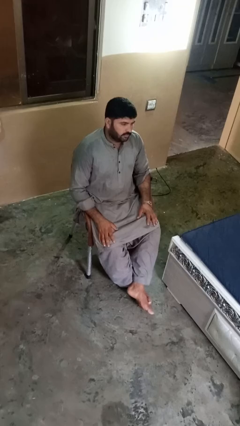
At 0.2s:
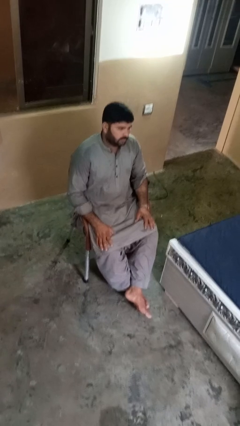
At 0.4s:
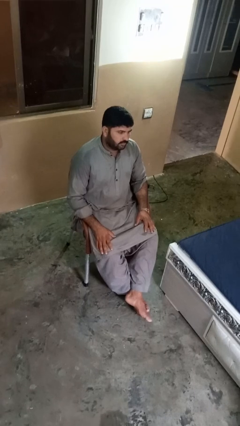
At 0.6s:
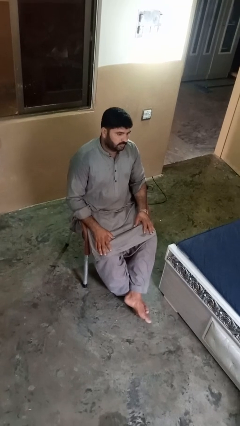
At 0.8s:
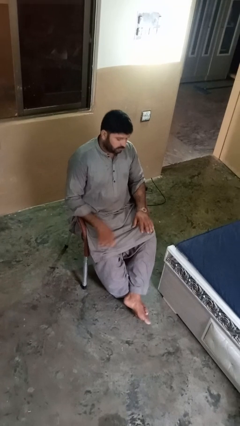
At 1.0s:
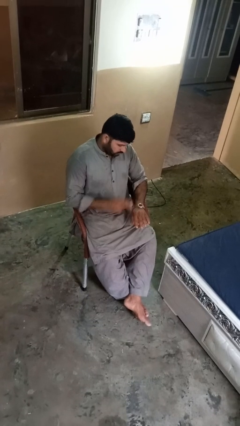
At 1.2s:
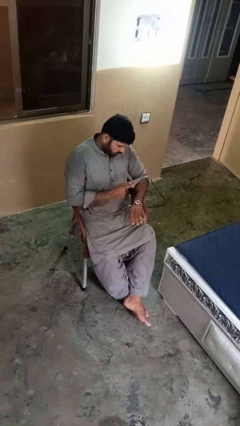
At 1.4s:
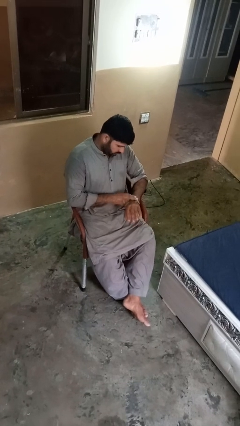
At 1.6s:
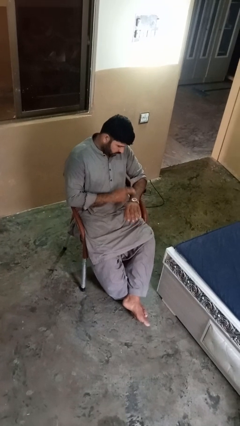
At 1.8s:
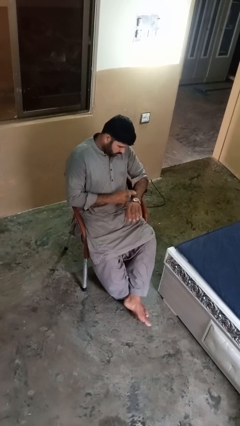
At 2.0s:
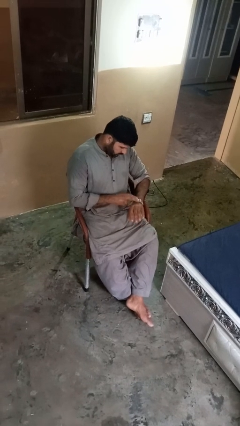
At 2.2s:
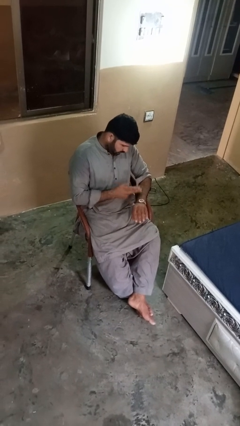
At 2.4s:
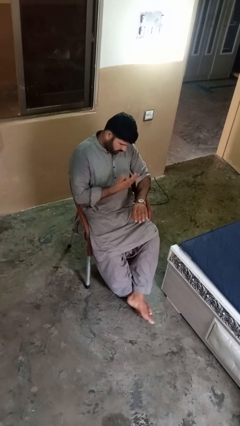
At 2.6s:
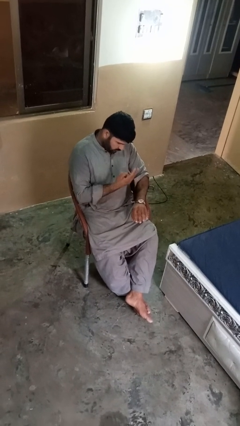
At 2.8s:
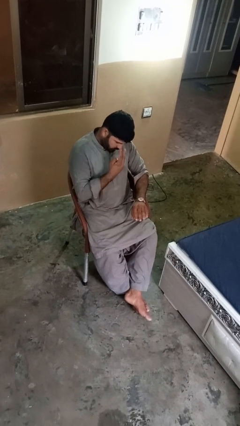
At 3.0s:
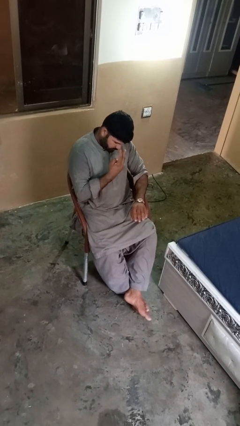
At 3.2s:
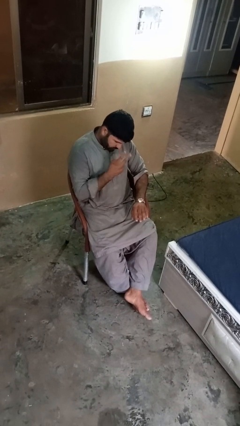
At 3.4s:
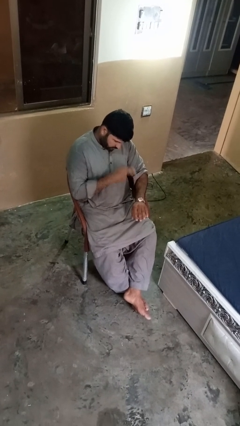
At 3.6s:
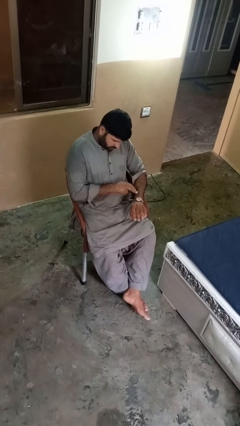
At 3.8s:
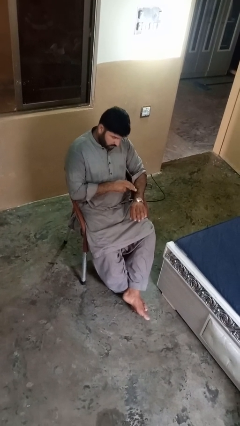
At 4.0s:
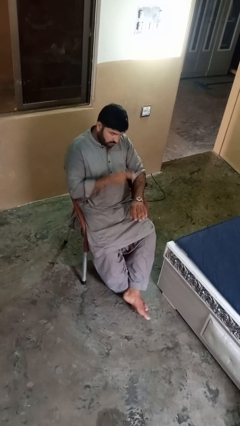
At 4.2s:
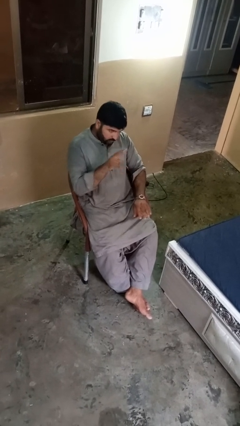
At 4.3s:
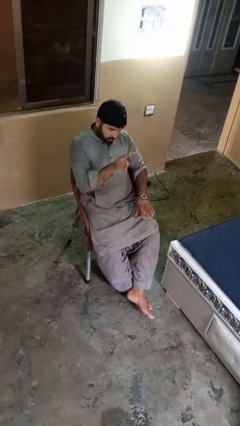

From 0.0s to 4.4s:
person gestures watch closely

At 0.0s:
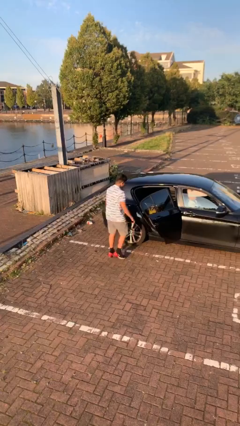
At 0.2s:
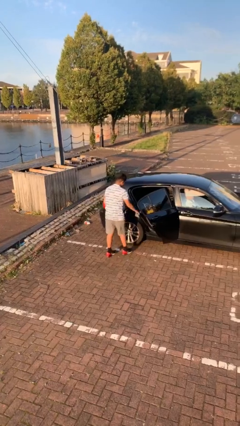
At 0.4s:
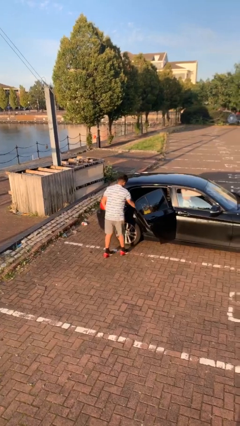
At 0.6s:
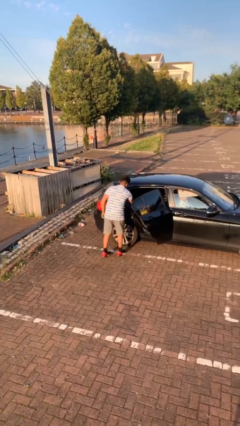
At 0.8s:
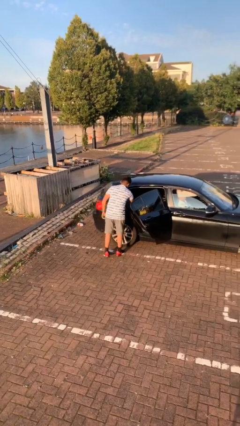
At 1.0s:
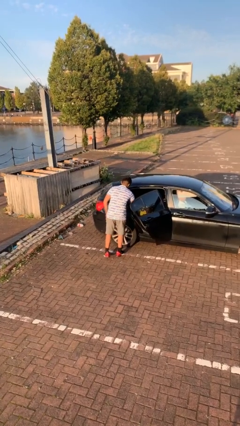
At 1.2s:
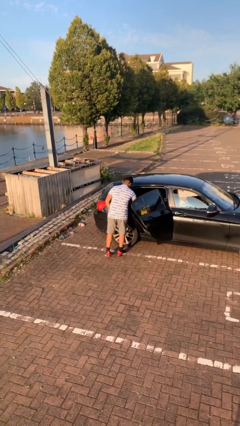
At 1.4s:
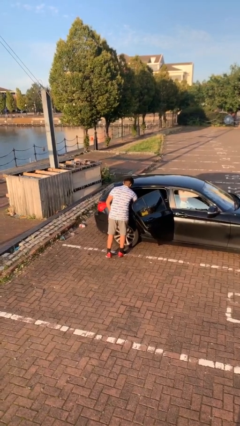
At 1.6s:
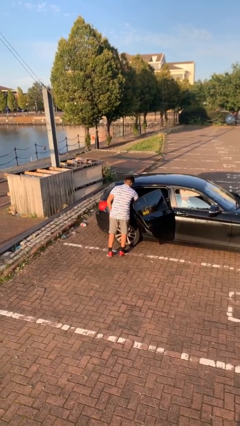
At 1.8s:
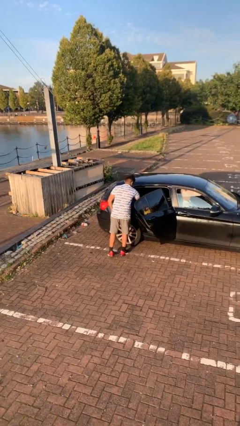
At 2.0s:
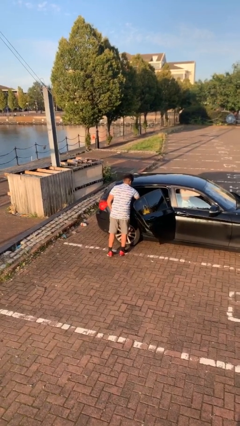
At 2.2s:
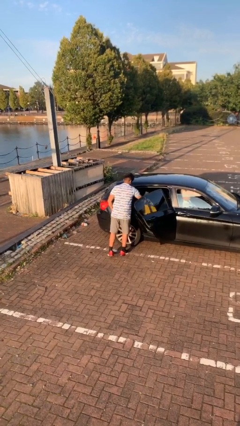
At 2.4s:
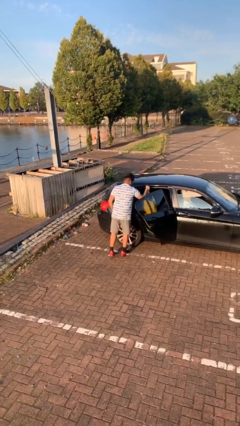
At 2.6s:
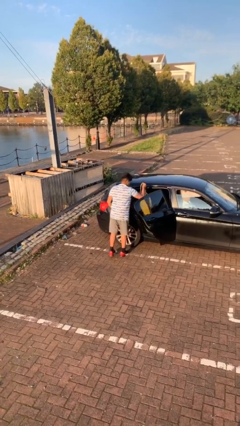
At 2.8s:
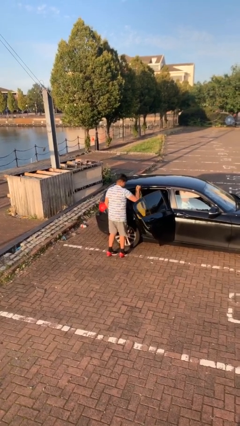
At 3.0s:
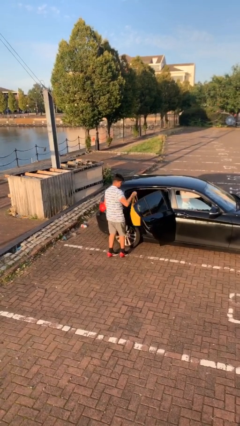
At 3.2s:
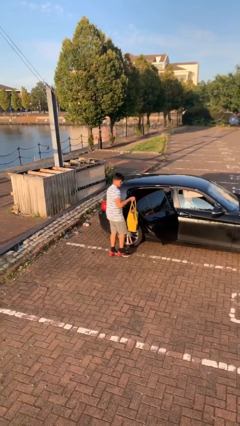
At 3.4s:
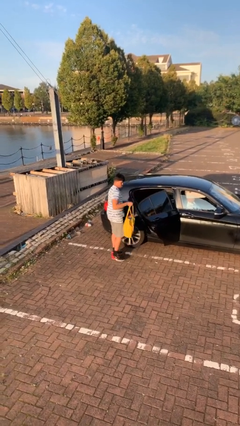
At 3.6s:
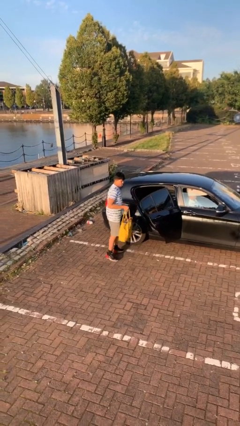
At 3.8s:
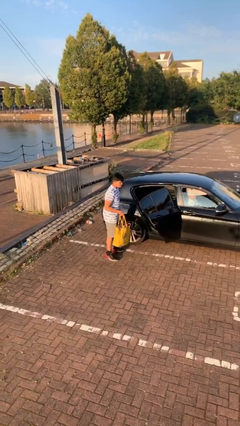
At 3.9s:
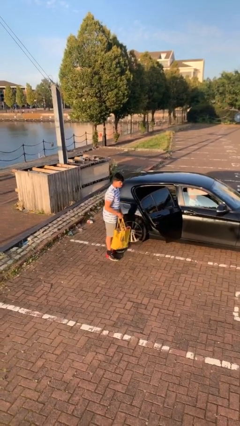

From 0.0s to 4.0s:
person unloads car

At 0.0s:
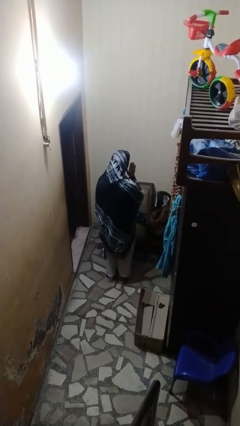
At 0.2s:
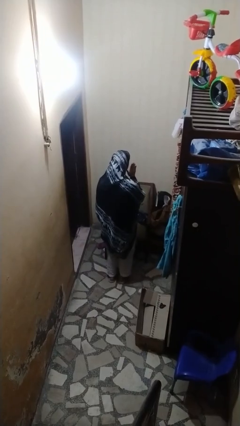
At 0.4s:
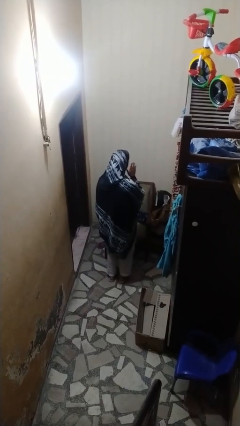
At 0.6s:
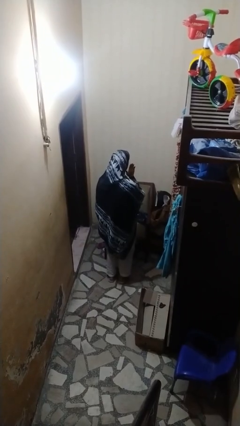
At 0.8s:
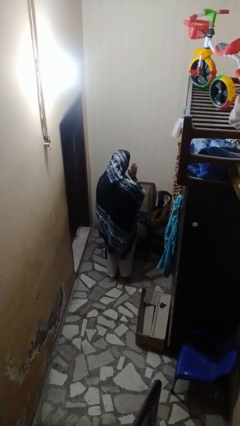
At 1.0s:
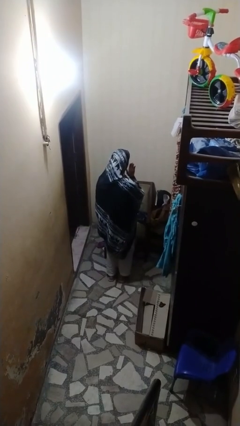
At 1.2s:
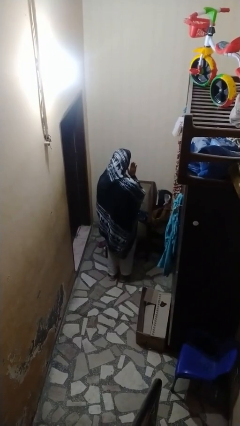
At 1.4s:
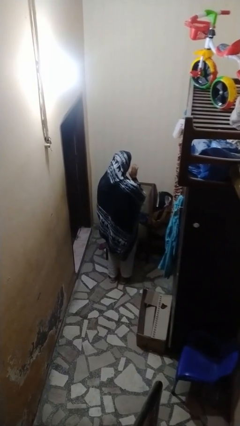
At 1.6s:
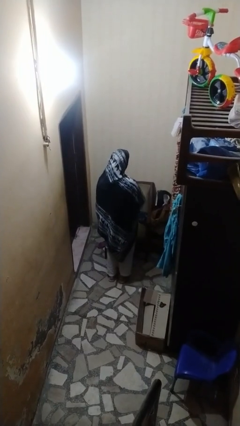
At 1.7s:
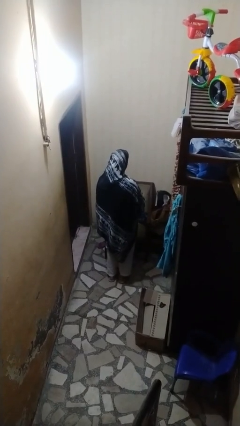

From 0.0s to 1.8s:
person gestures stop

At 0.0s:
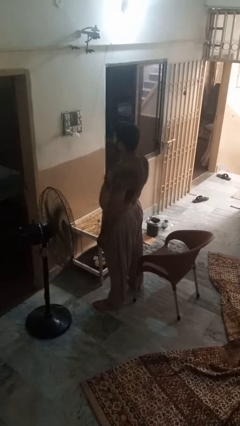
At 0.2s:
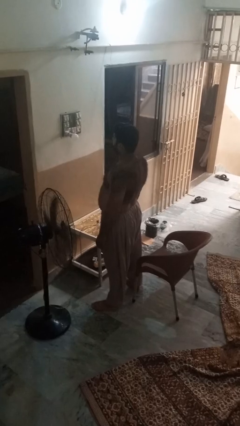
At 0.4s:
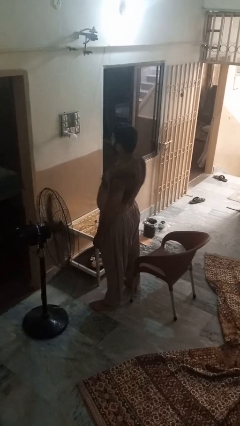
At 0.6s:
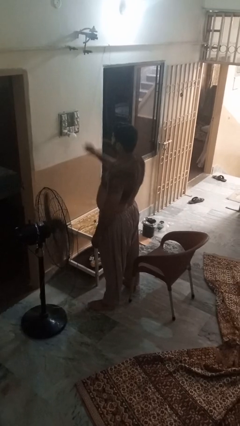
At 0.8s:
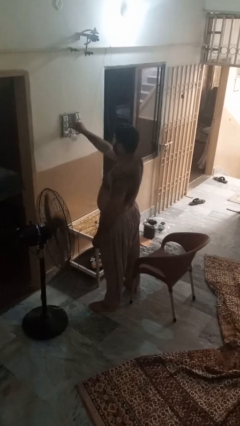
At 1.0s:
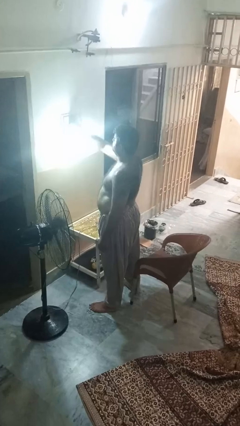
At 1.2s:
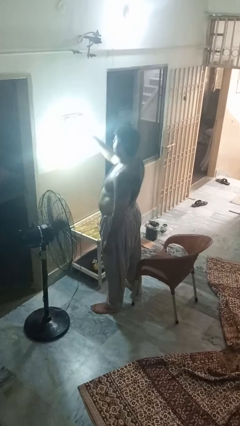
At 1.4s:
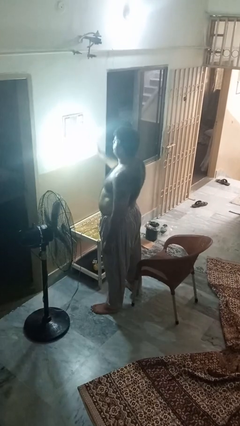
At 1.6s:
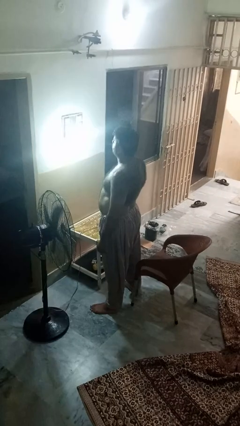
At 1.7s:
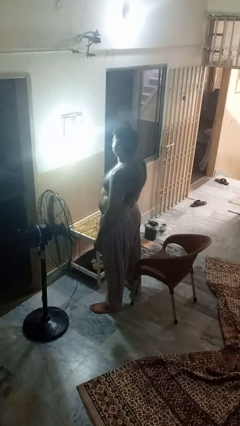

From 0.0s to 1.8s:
person turns on lamp

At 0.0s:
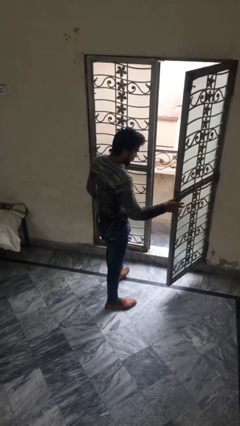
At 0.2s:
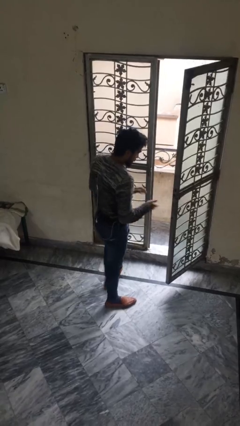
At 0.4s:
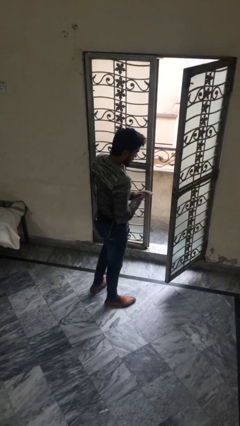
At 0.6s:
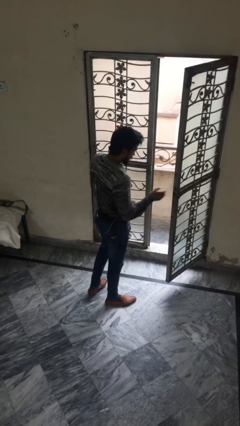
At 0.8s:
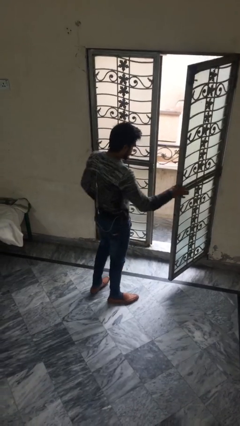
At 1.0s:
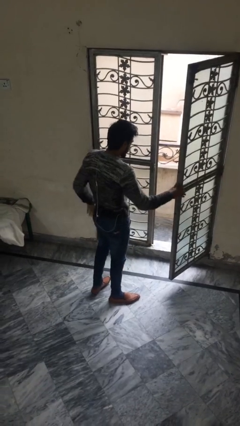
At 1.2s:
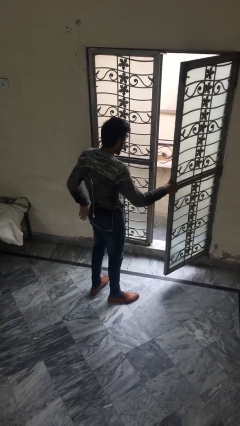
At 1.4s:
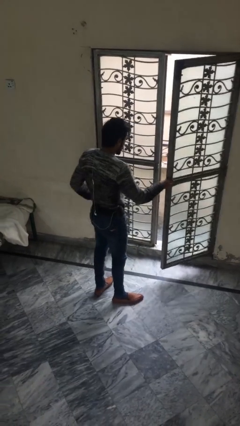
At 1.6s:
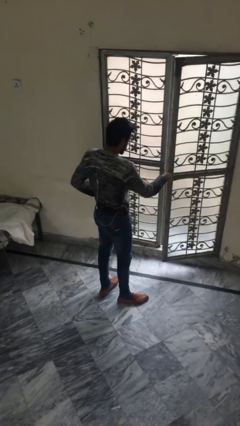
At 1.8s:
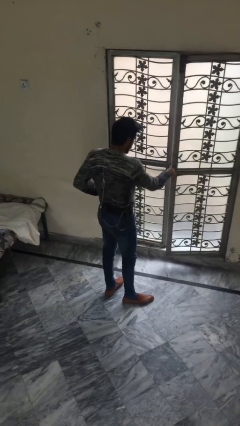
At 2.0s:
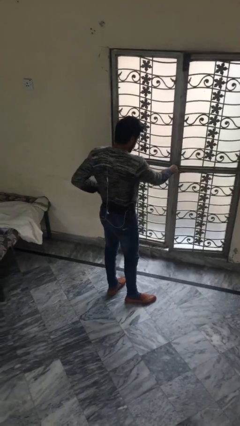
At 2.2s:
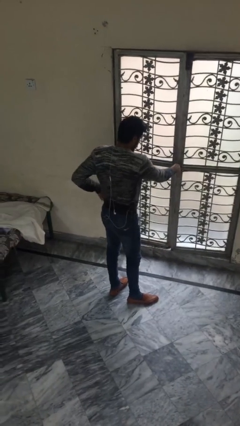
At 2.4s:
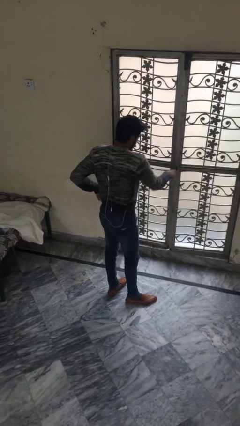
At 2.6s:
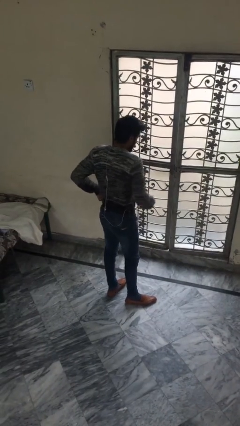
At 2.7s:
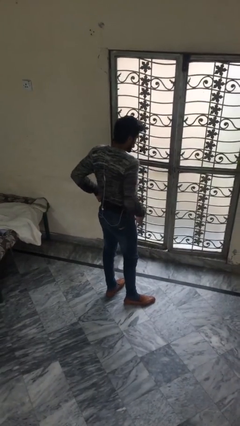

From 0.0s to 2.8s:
person closes facility door

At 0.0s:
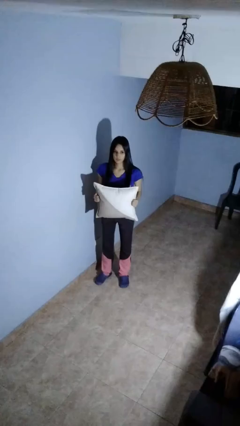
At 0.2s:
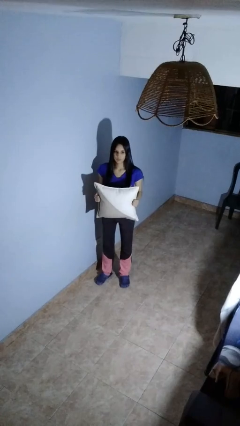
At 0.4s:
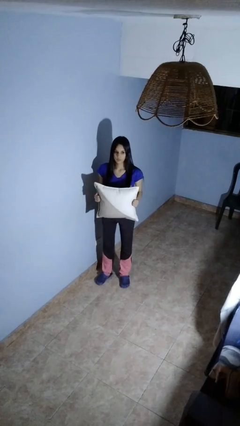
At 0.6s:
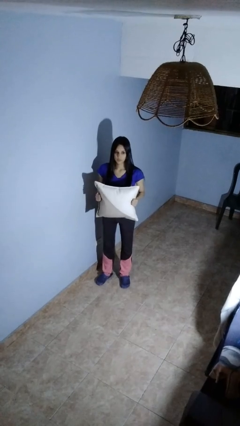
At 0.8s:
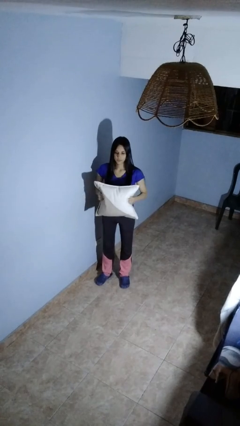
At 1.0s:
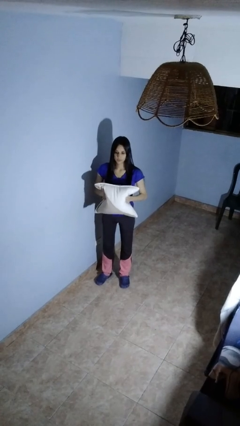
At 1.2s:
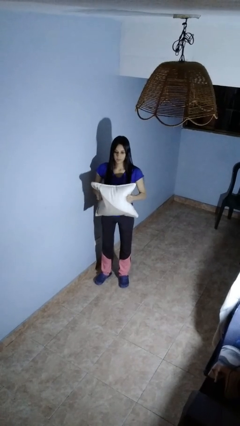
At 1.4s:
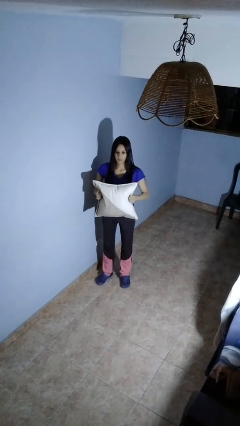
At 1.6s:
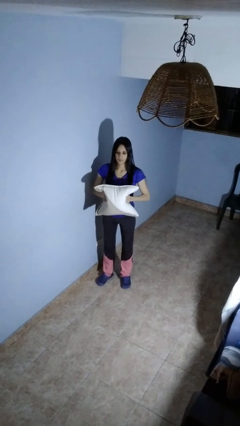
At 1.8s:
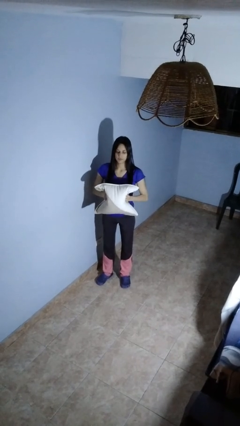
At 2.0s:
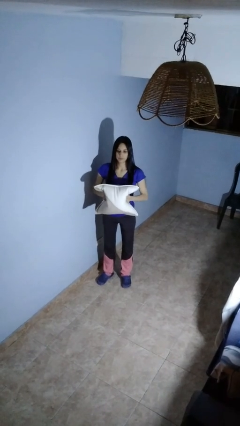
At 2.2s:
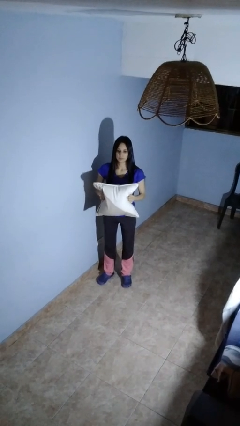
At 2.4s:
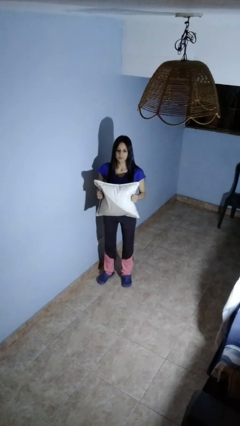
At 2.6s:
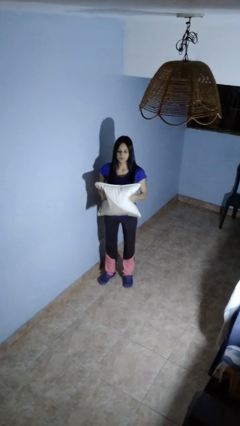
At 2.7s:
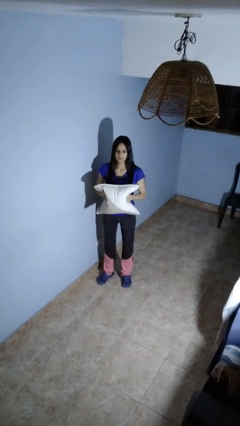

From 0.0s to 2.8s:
person waves hand over object

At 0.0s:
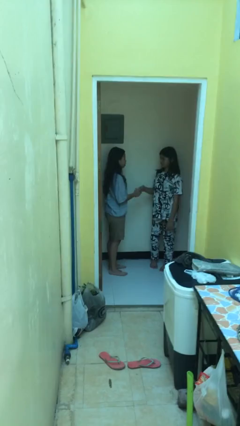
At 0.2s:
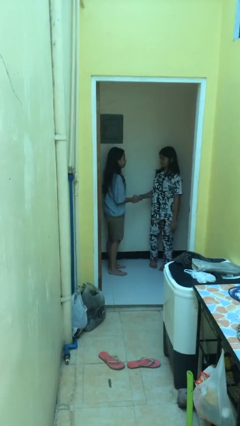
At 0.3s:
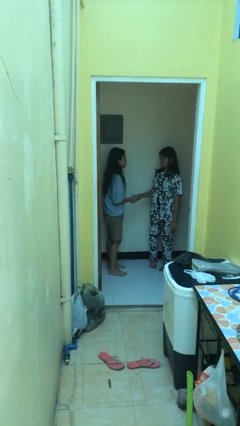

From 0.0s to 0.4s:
person shakes hand
